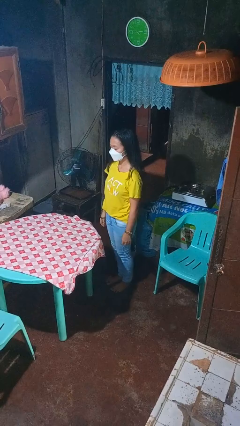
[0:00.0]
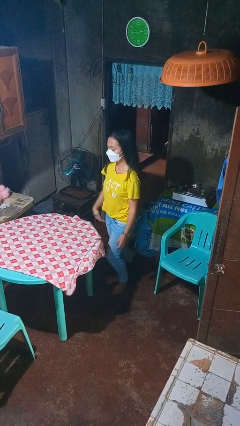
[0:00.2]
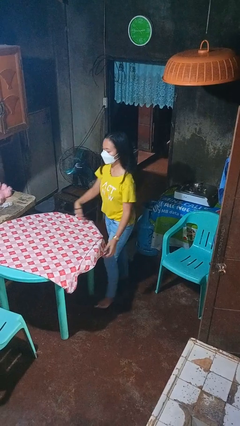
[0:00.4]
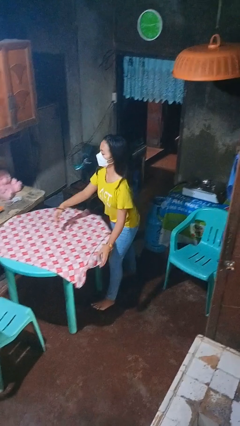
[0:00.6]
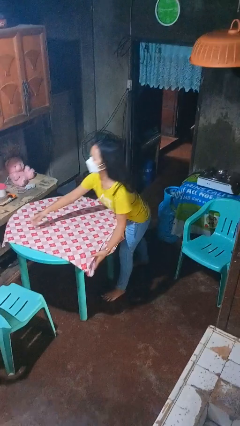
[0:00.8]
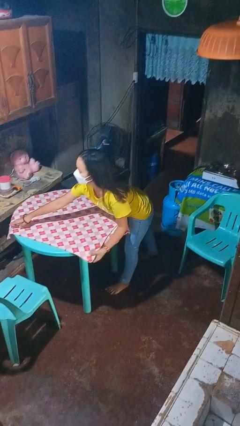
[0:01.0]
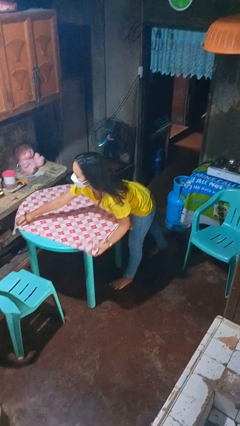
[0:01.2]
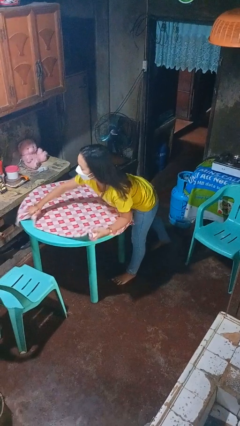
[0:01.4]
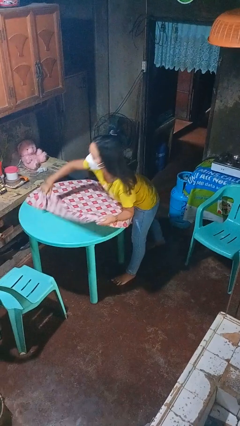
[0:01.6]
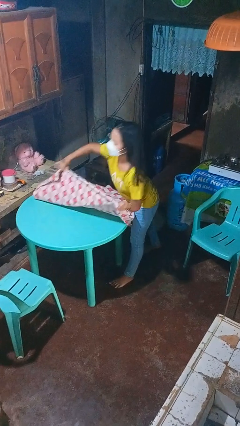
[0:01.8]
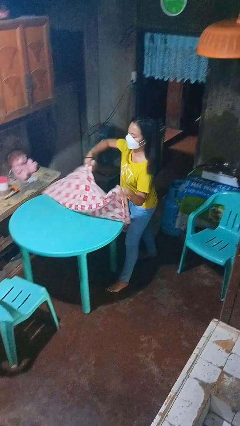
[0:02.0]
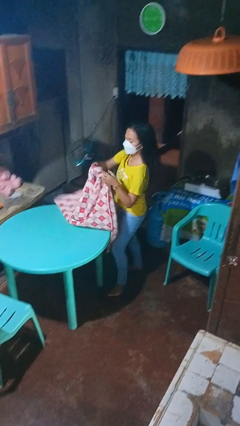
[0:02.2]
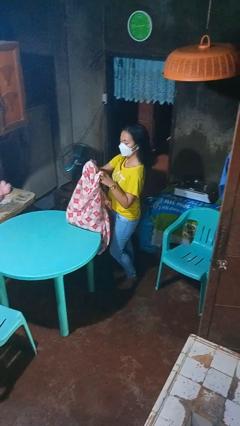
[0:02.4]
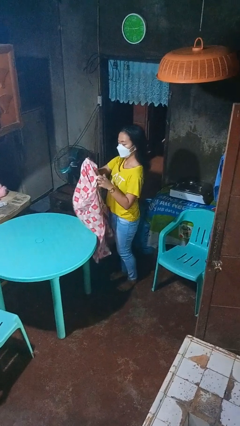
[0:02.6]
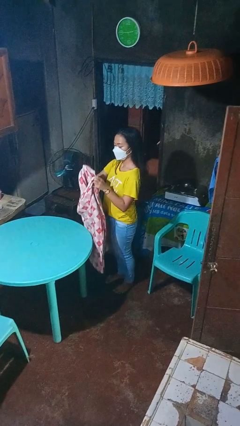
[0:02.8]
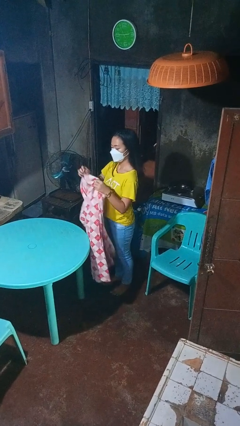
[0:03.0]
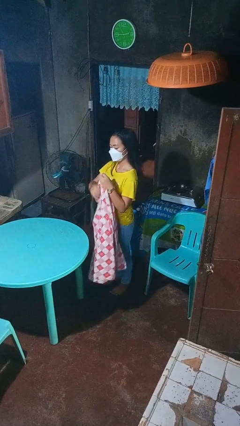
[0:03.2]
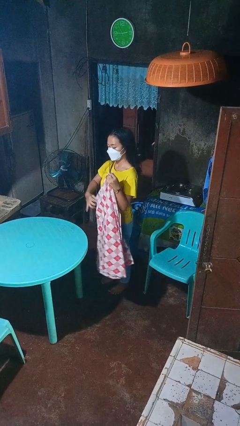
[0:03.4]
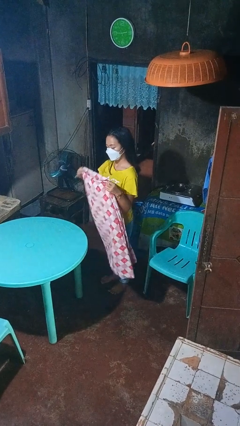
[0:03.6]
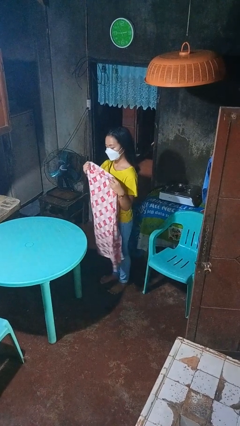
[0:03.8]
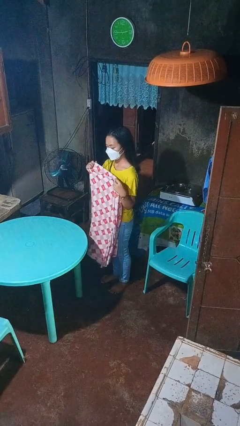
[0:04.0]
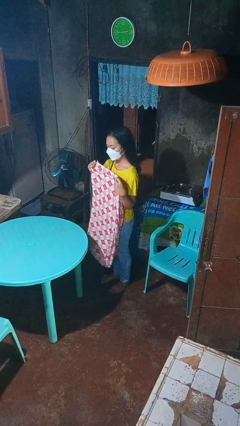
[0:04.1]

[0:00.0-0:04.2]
person folds tablecloth

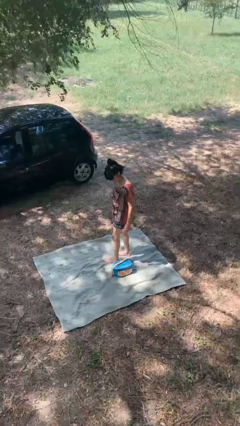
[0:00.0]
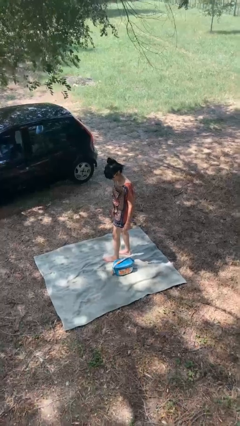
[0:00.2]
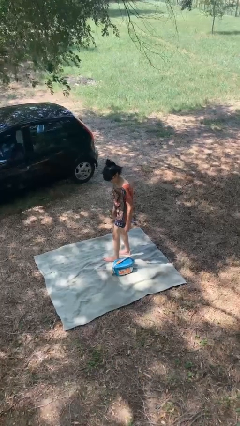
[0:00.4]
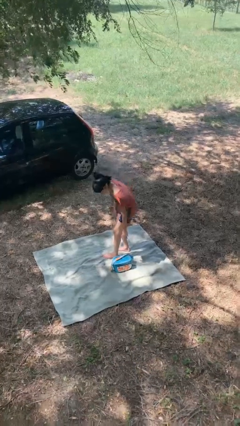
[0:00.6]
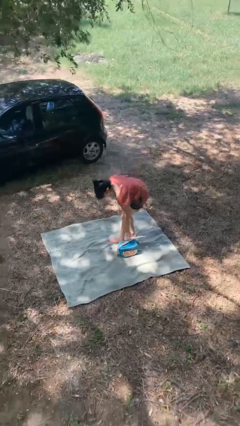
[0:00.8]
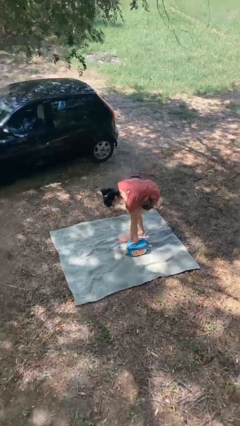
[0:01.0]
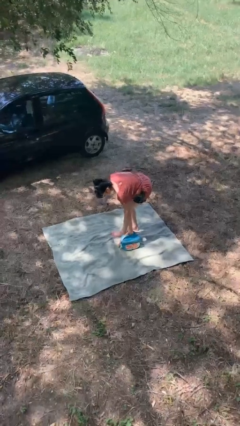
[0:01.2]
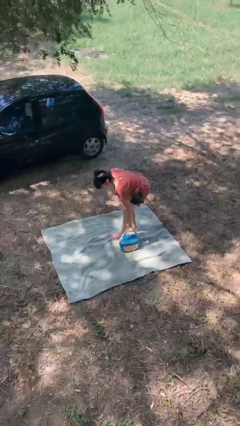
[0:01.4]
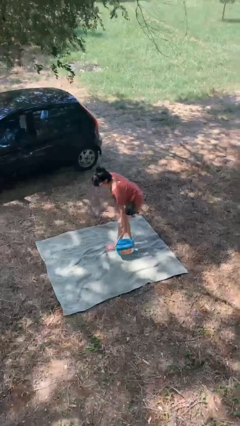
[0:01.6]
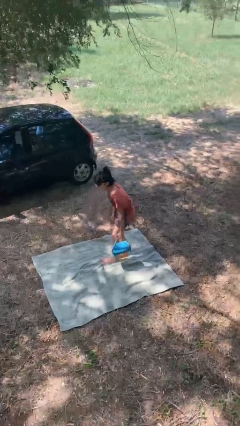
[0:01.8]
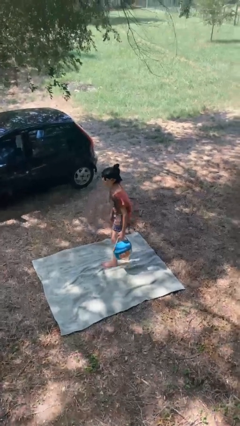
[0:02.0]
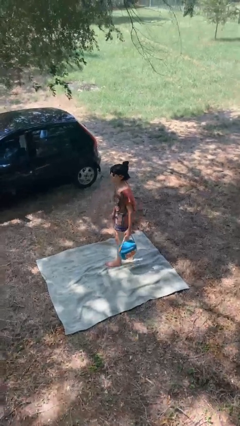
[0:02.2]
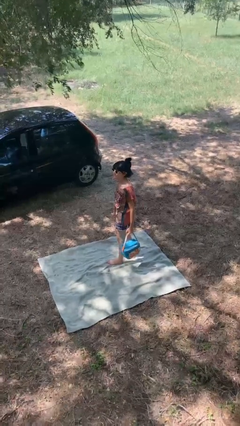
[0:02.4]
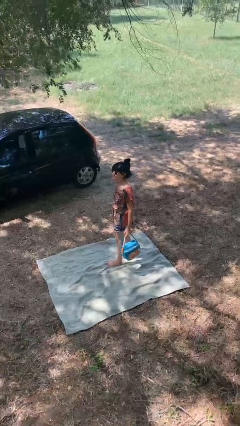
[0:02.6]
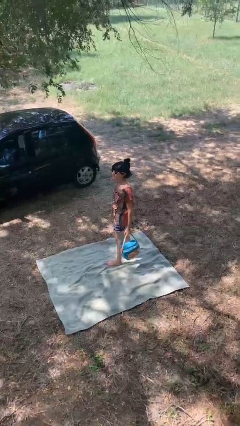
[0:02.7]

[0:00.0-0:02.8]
person picks up object from floor

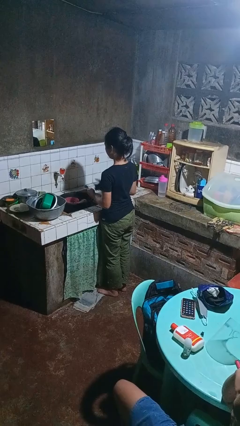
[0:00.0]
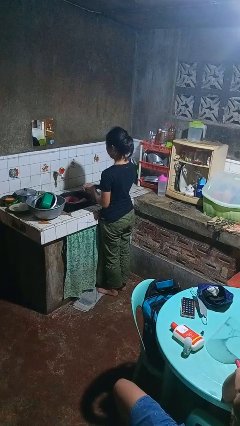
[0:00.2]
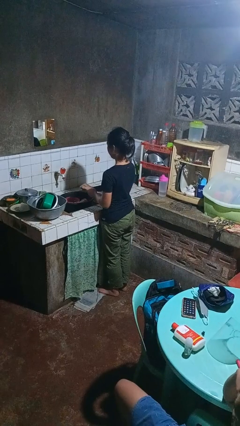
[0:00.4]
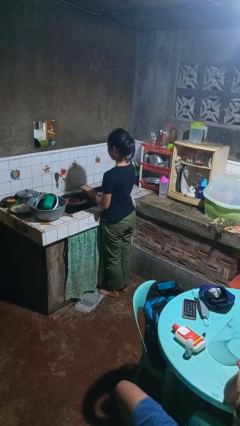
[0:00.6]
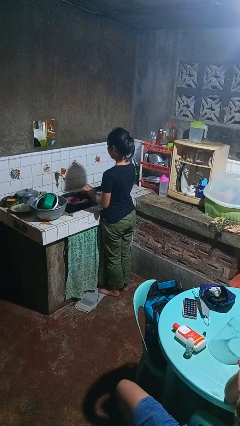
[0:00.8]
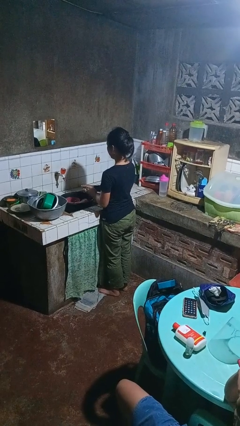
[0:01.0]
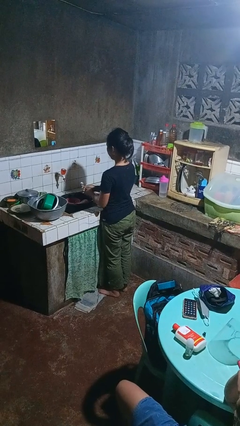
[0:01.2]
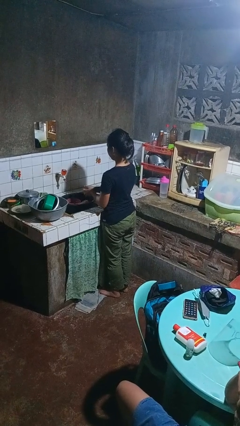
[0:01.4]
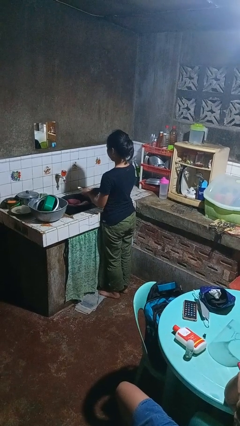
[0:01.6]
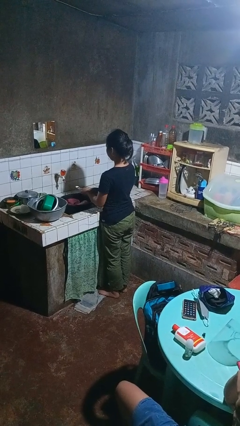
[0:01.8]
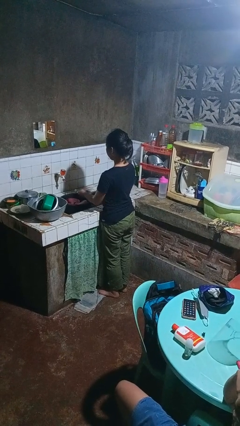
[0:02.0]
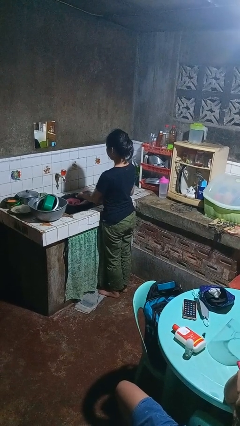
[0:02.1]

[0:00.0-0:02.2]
person washes dish

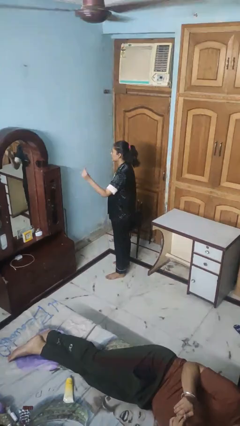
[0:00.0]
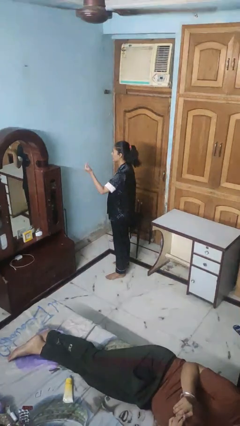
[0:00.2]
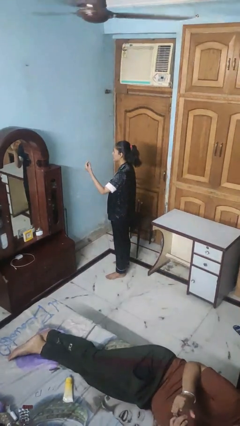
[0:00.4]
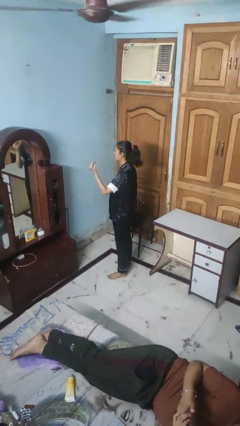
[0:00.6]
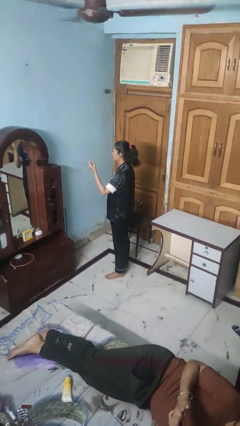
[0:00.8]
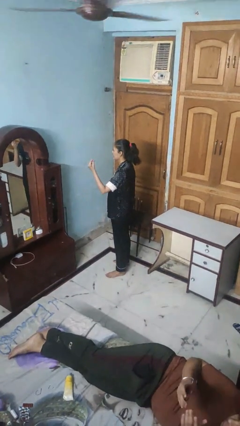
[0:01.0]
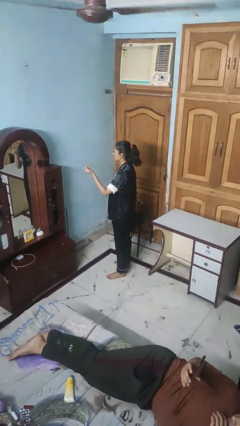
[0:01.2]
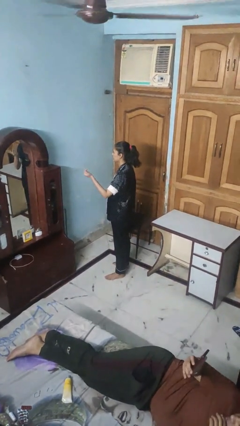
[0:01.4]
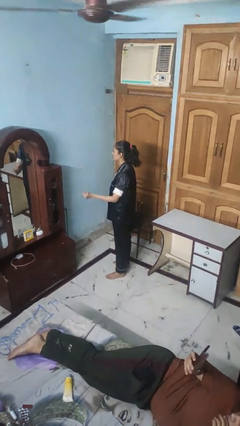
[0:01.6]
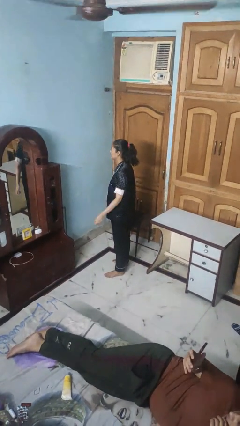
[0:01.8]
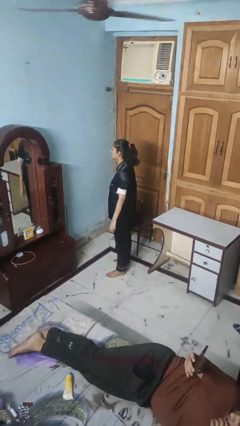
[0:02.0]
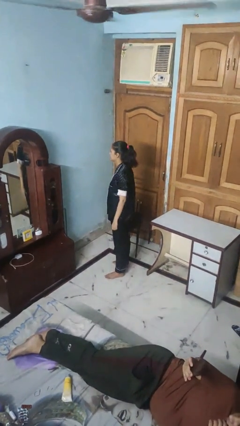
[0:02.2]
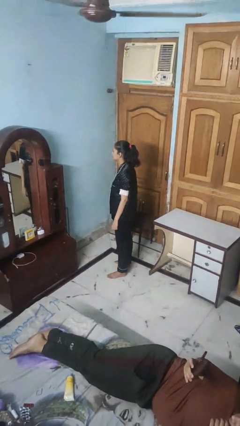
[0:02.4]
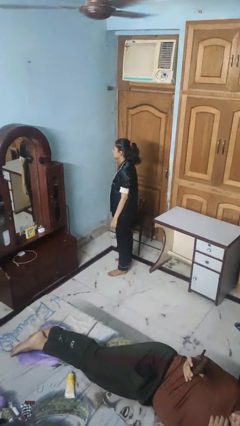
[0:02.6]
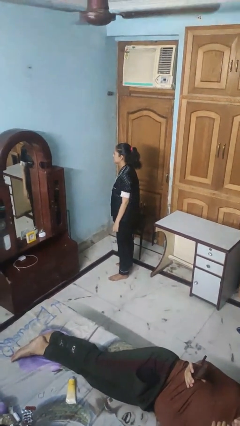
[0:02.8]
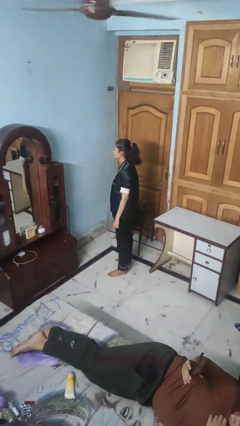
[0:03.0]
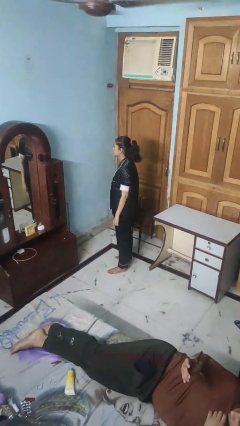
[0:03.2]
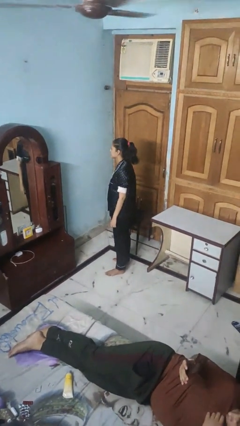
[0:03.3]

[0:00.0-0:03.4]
person snaps fingers

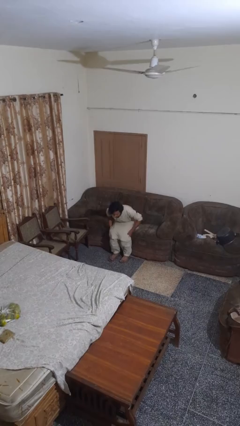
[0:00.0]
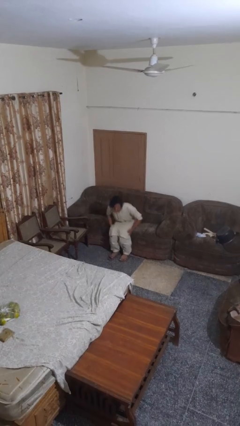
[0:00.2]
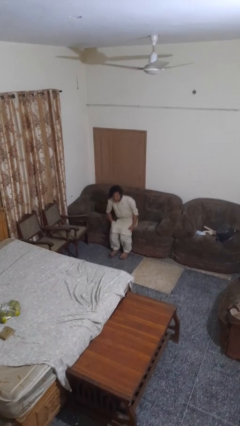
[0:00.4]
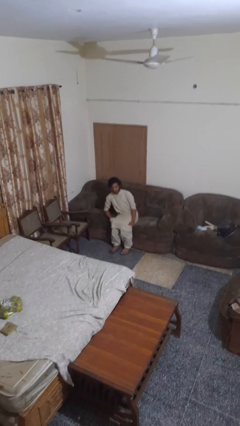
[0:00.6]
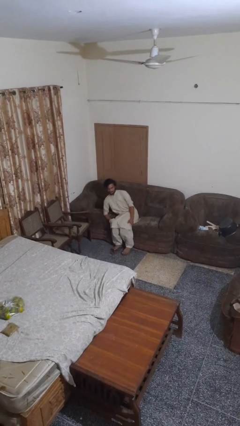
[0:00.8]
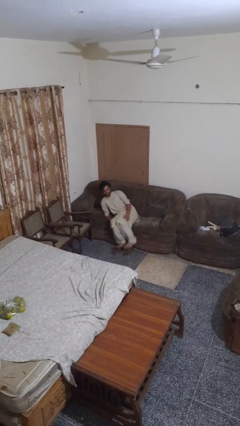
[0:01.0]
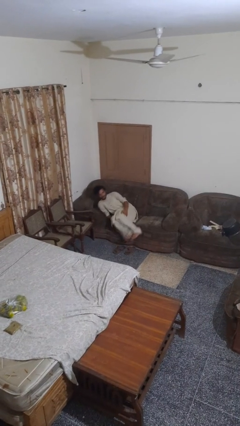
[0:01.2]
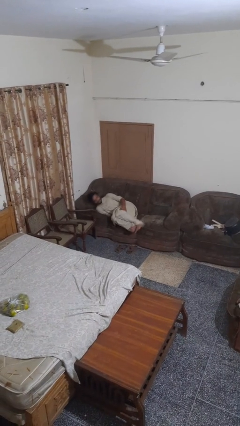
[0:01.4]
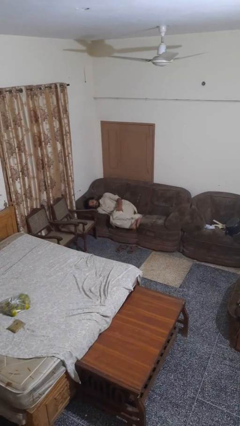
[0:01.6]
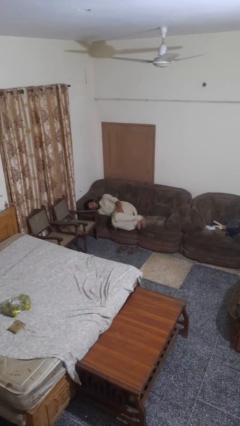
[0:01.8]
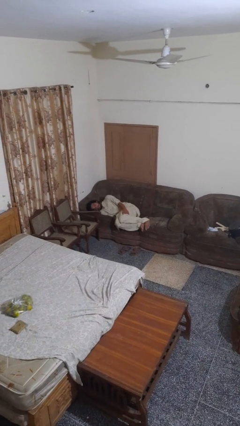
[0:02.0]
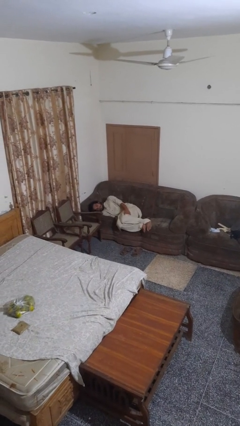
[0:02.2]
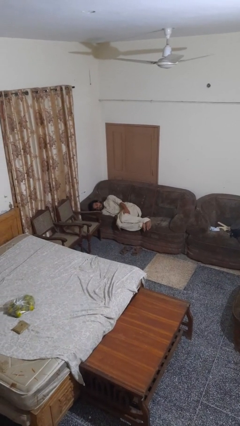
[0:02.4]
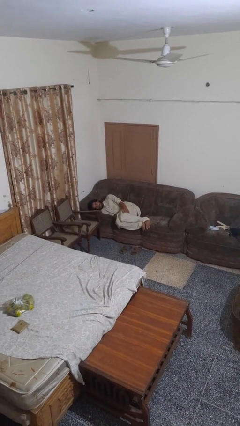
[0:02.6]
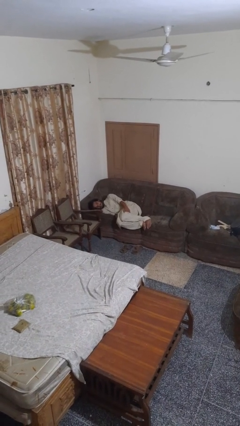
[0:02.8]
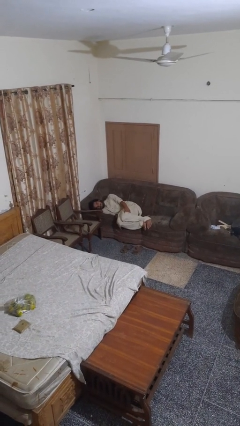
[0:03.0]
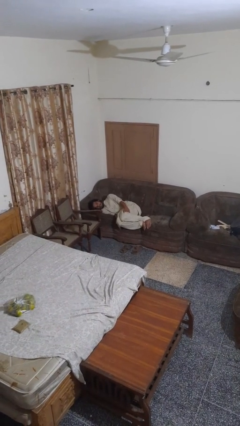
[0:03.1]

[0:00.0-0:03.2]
person lies down on couch

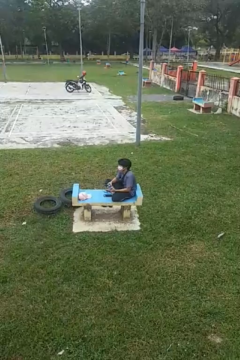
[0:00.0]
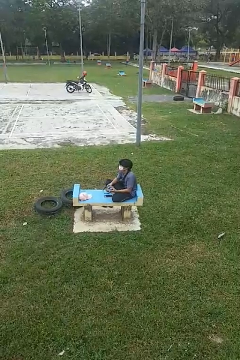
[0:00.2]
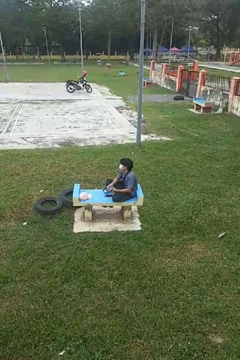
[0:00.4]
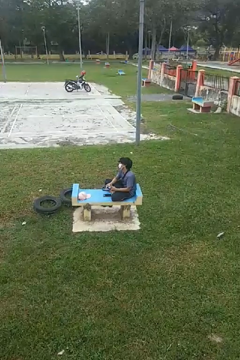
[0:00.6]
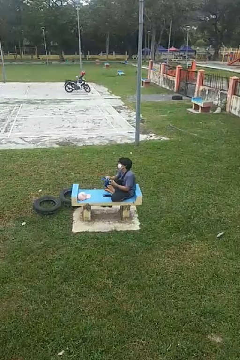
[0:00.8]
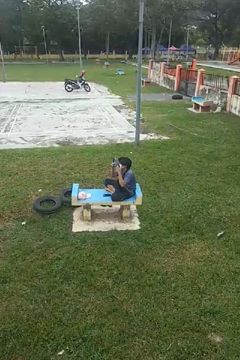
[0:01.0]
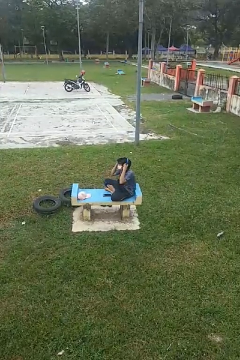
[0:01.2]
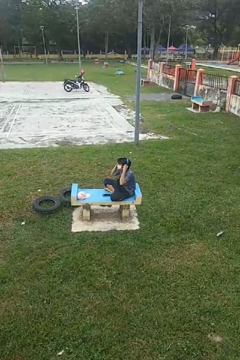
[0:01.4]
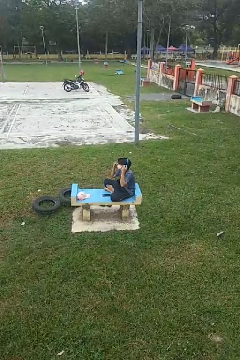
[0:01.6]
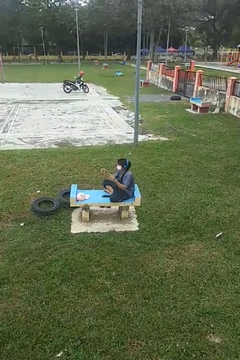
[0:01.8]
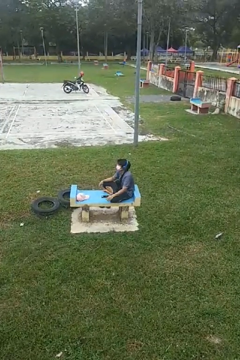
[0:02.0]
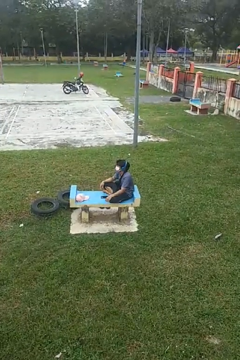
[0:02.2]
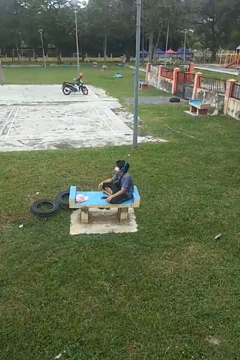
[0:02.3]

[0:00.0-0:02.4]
person puts on headphones

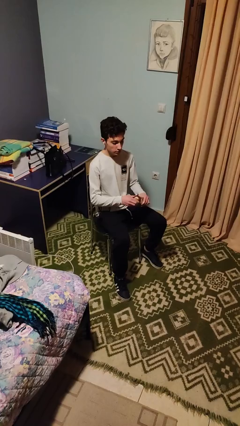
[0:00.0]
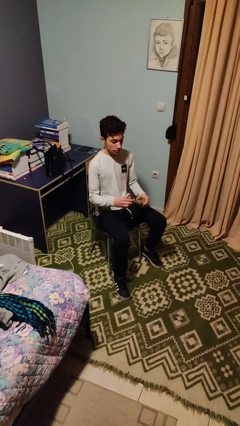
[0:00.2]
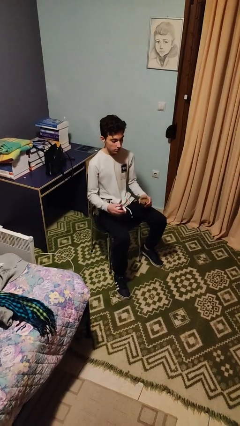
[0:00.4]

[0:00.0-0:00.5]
person opens jar
